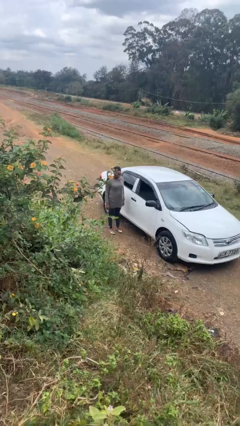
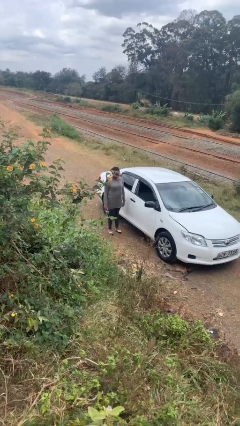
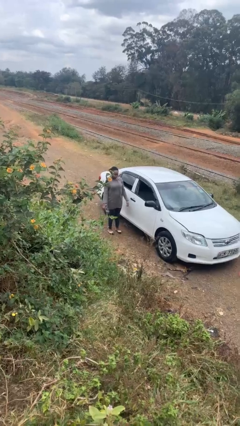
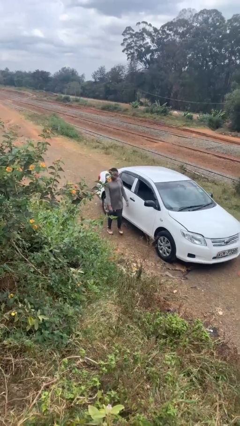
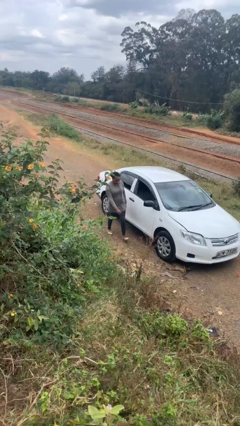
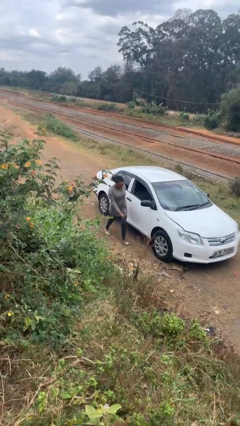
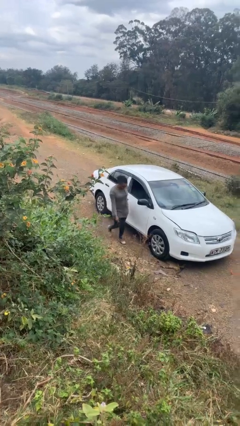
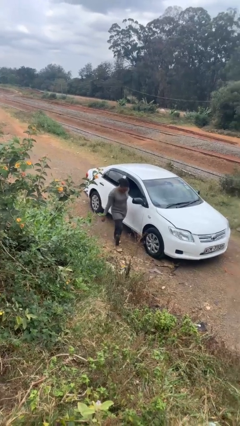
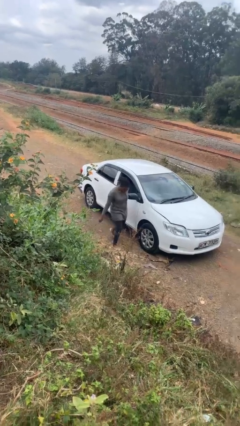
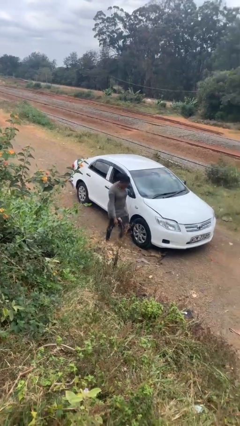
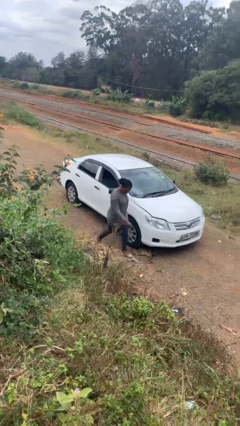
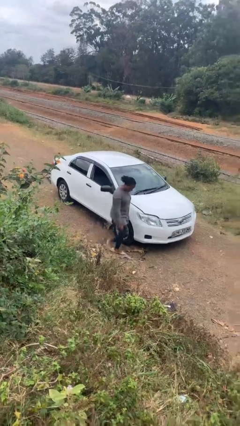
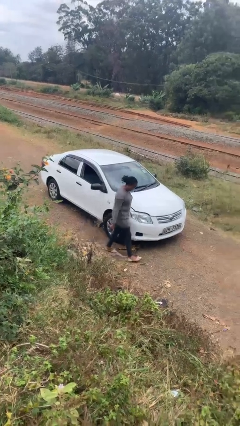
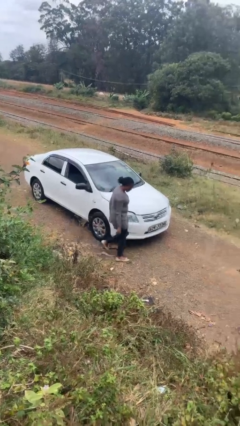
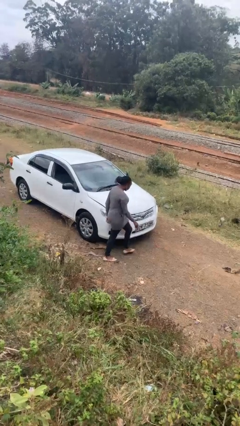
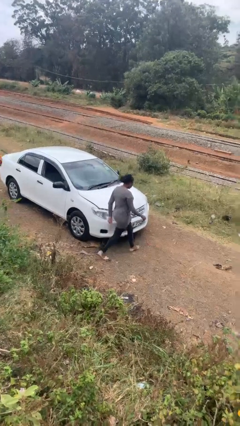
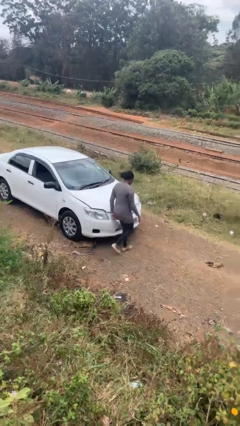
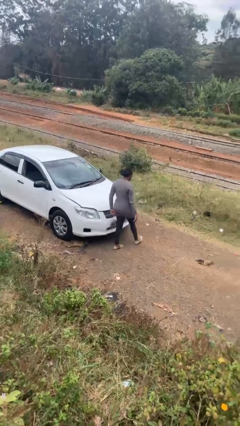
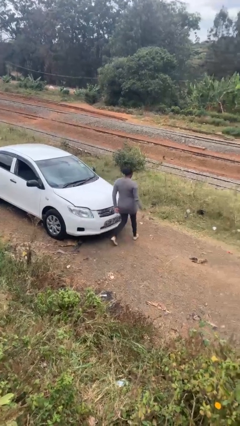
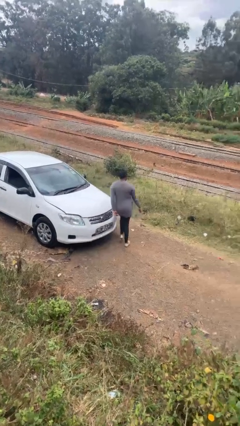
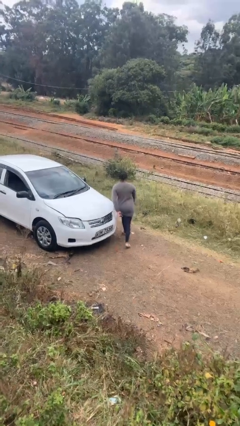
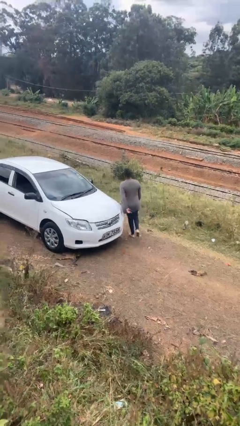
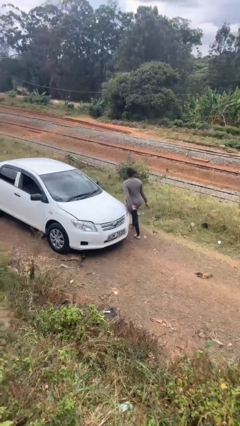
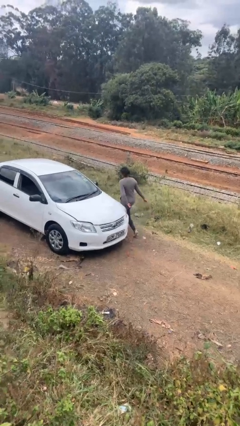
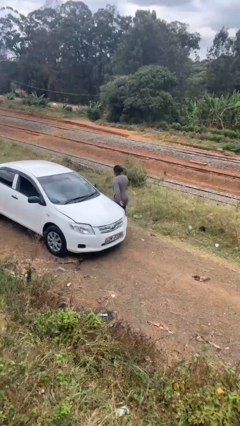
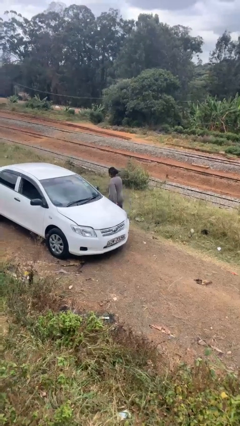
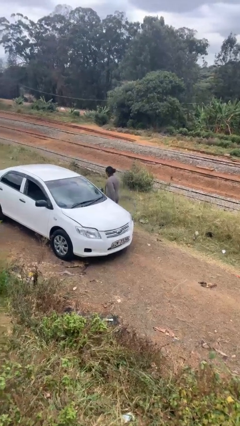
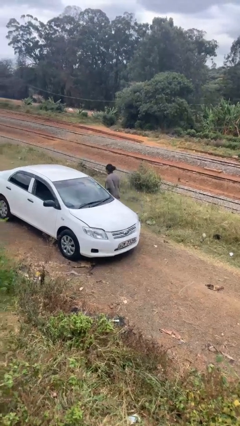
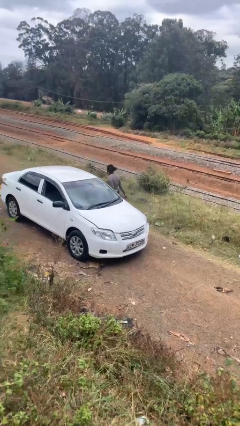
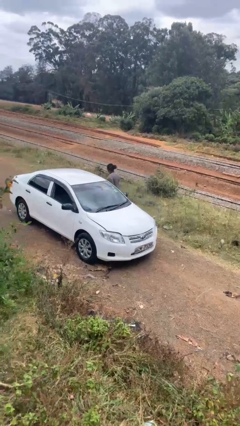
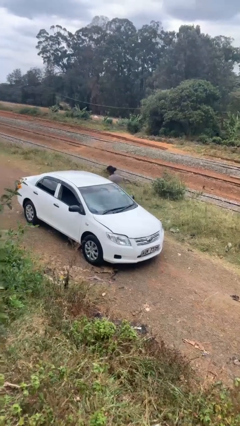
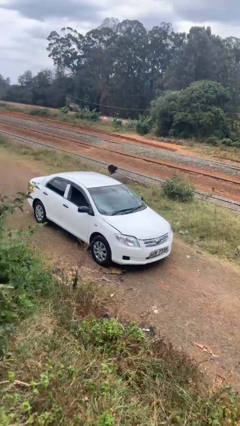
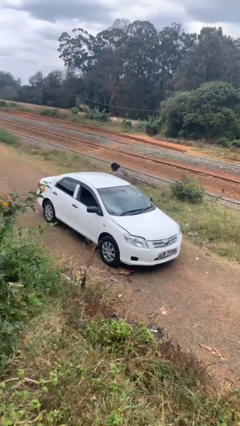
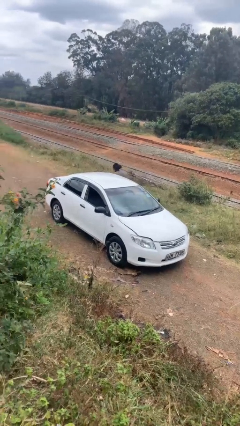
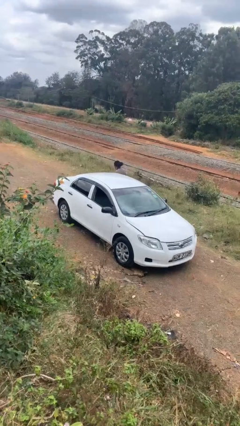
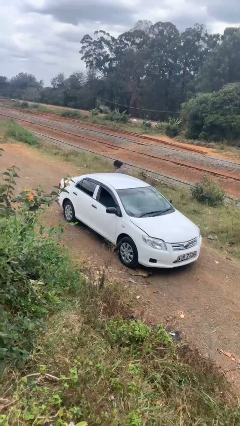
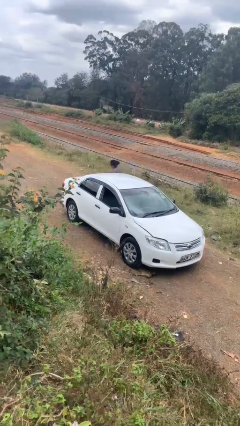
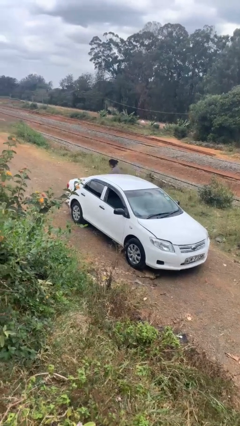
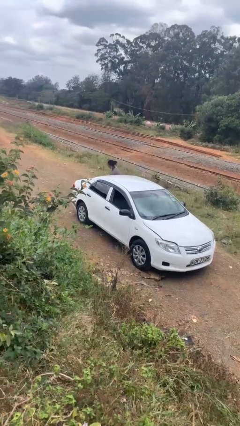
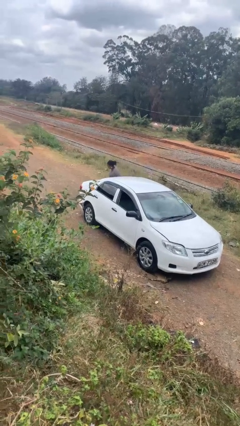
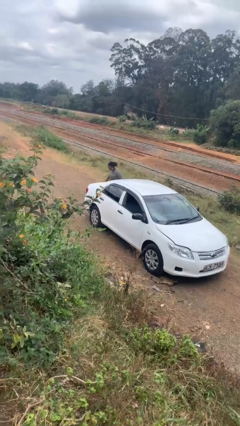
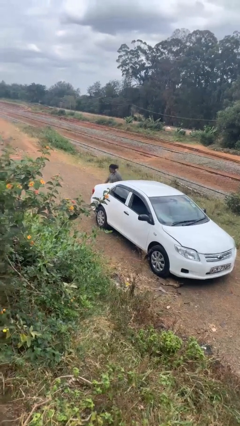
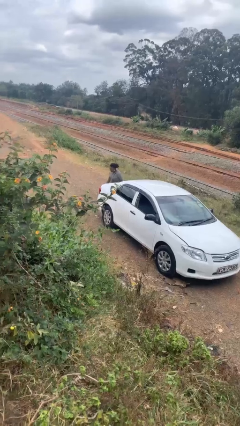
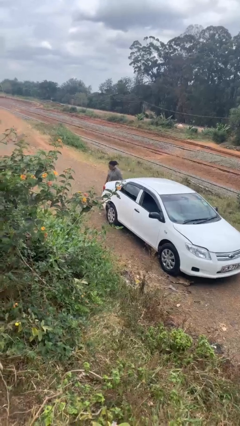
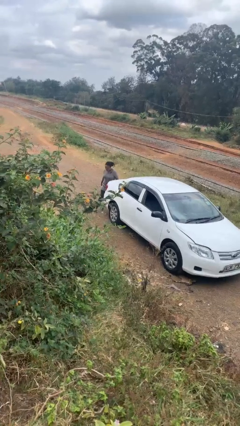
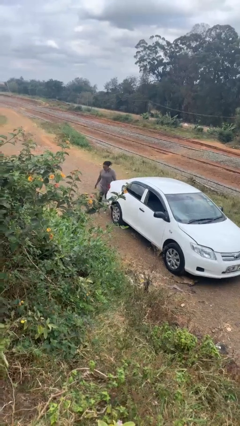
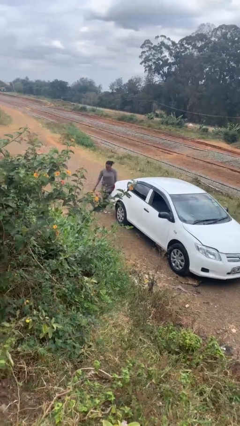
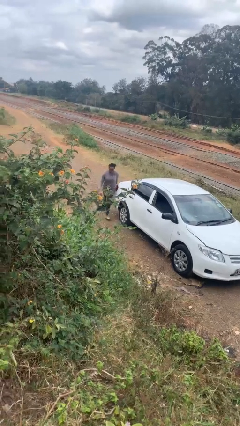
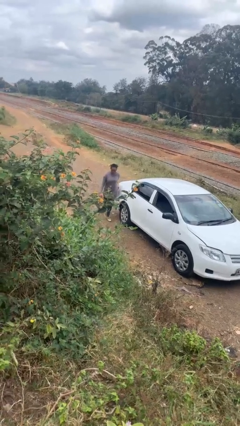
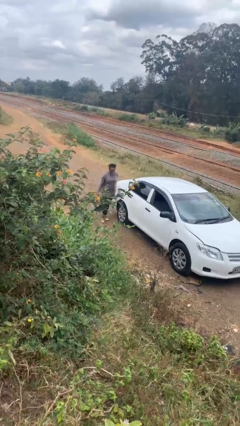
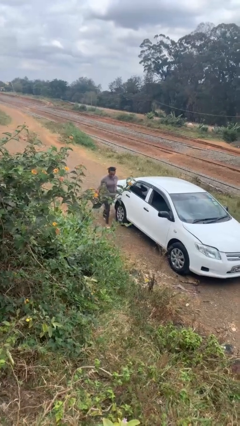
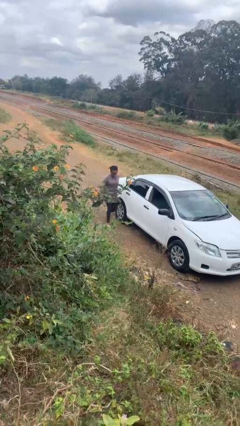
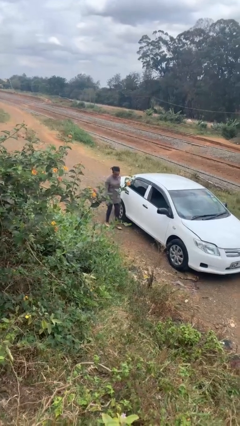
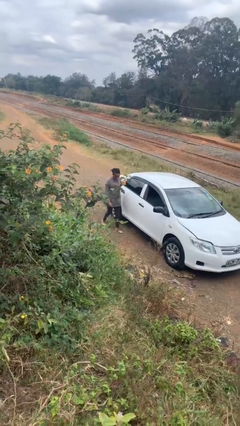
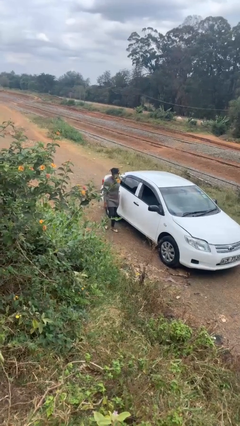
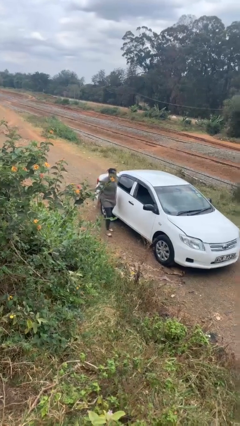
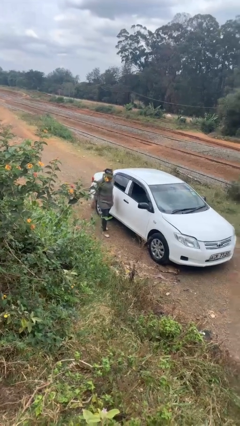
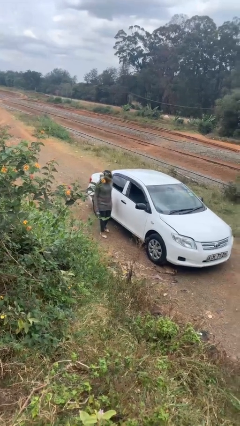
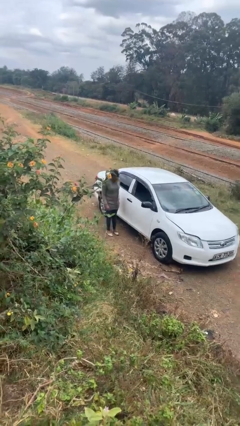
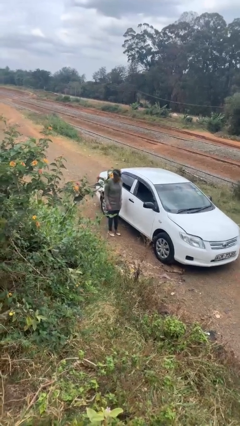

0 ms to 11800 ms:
person walks around car

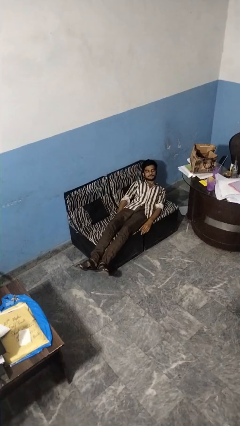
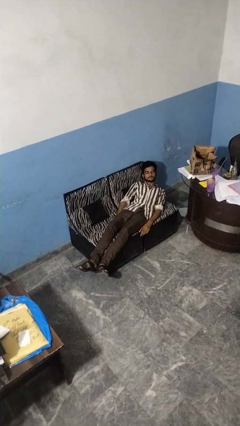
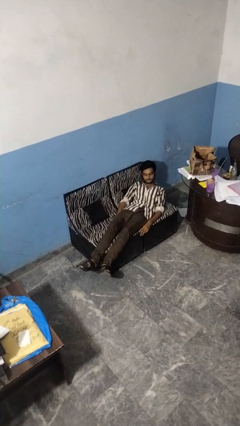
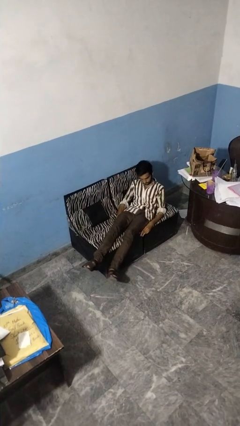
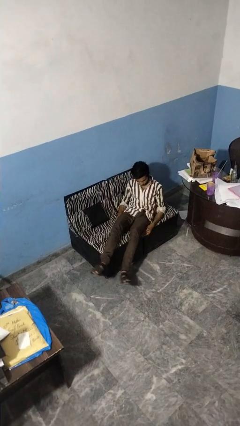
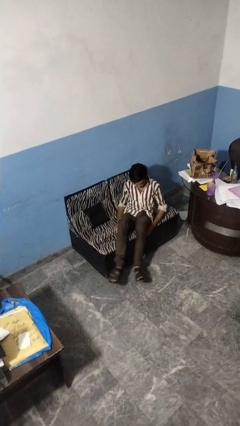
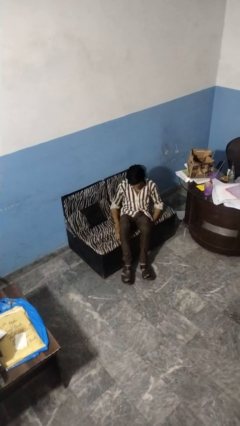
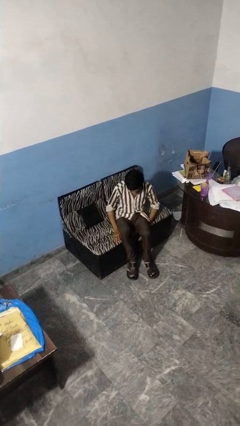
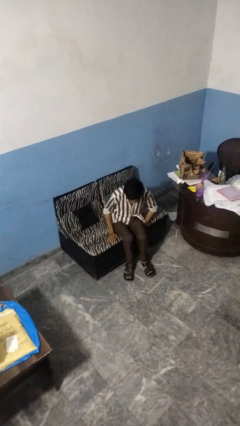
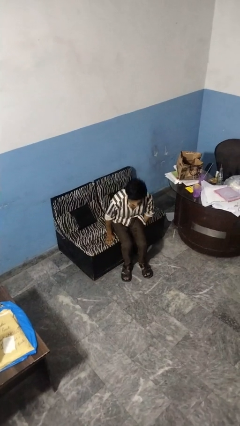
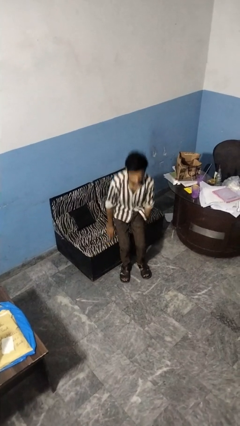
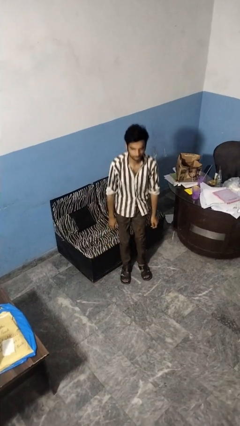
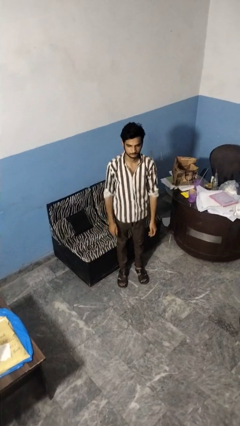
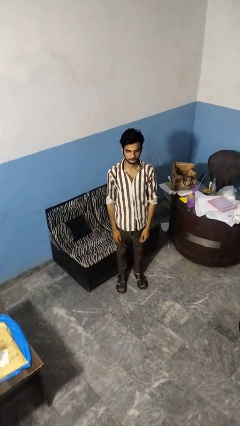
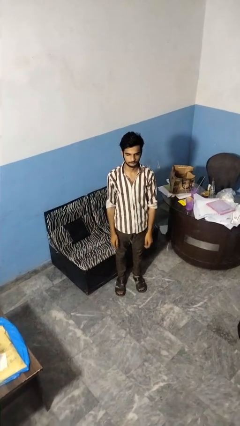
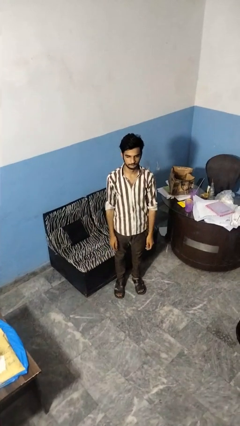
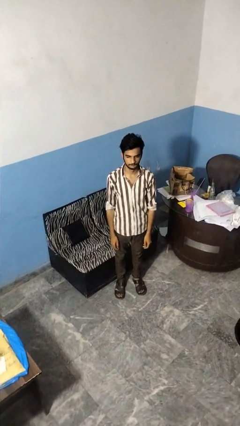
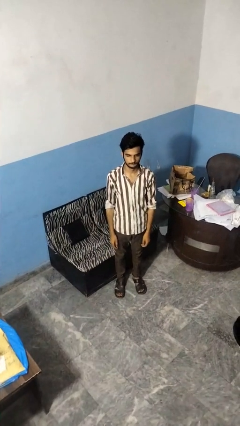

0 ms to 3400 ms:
person stands up

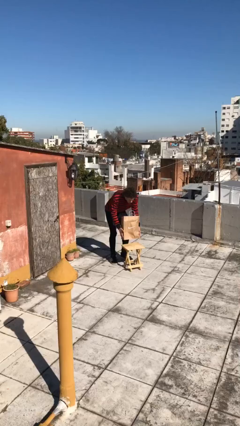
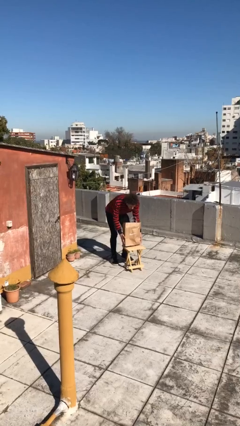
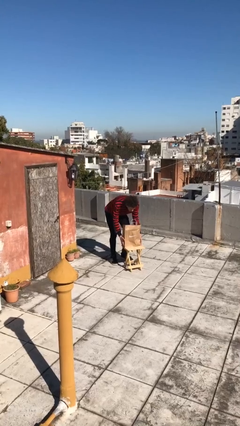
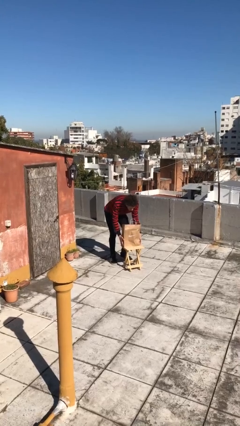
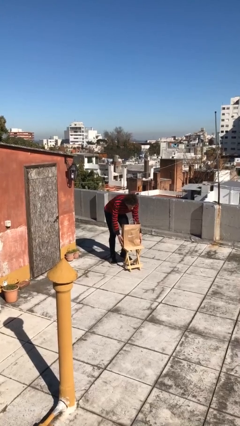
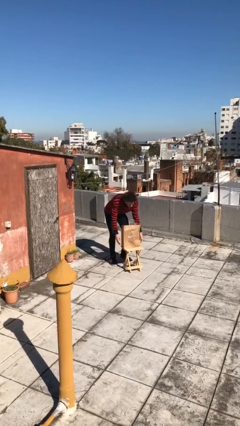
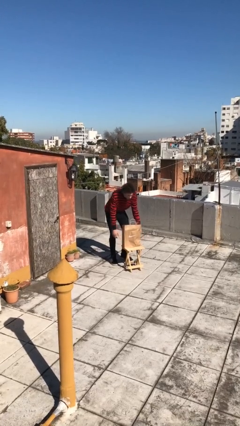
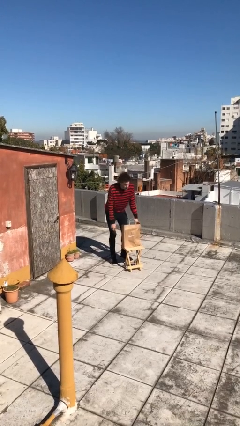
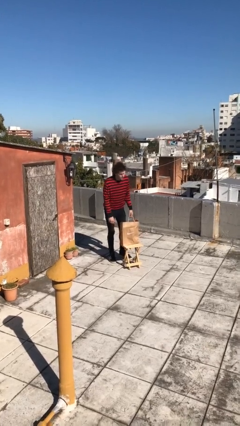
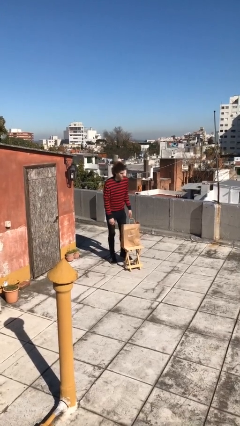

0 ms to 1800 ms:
person puts down object on table

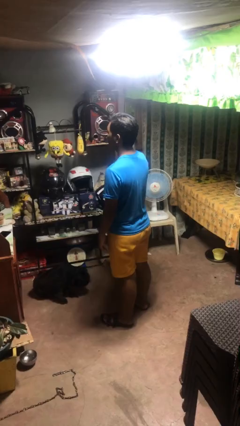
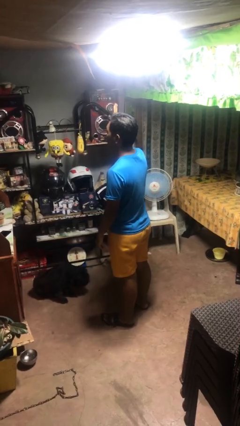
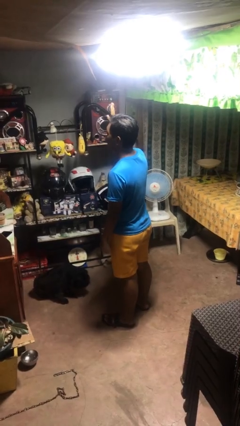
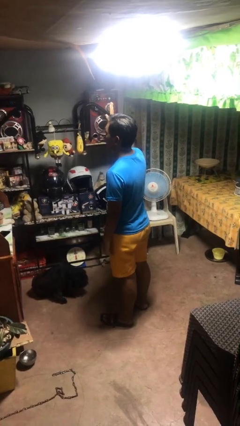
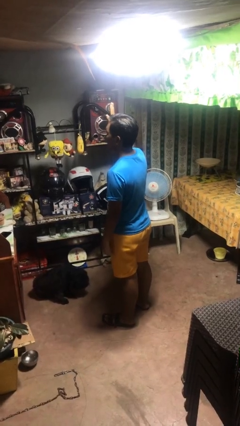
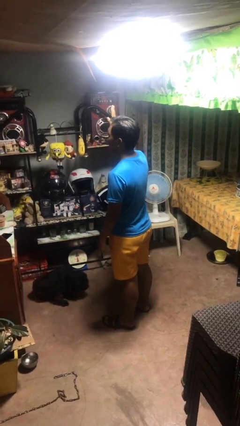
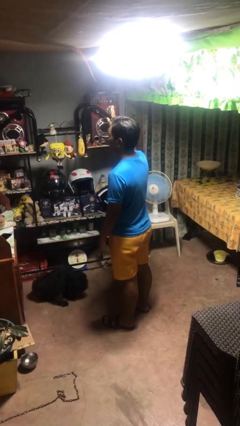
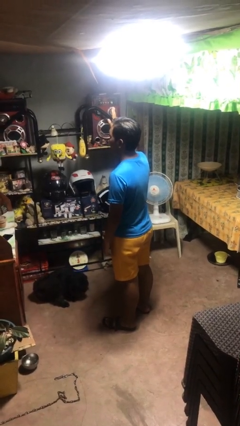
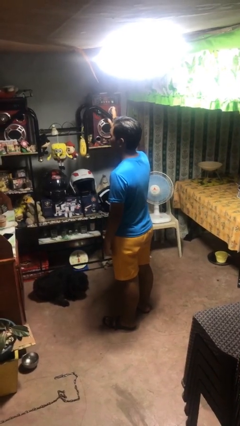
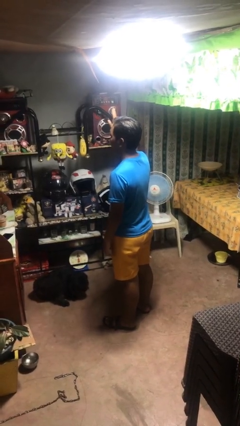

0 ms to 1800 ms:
person gestures raise hand
